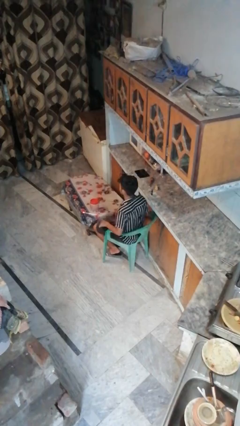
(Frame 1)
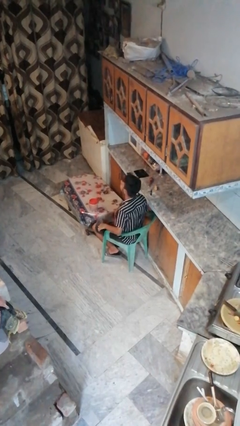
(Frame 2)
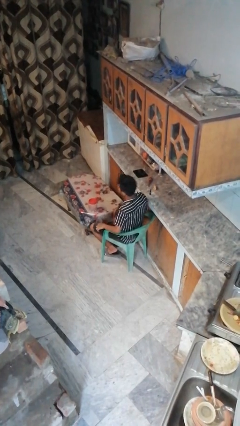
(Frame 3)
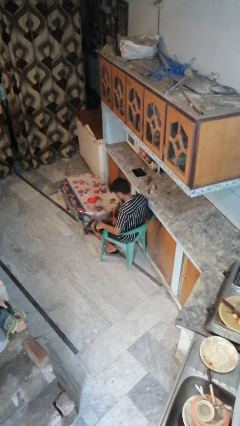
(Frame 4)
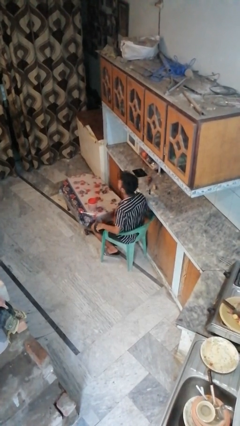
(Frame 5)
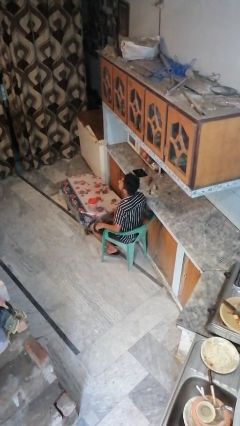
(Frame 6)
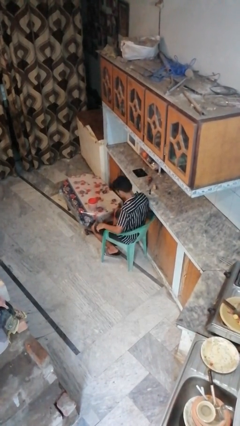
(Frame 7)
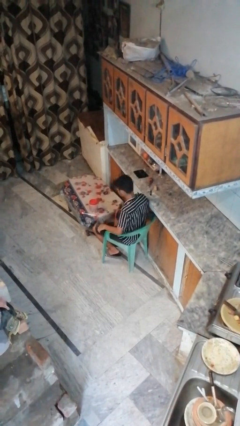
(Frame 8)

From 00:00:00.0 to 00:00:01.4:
person nods head

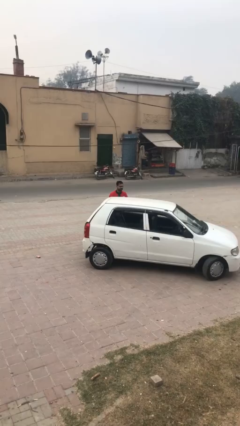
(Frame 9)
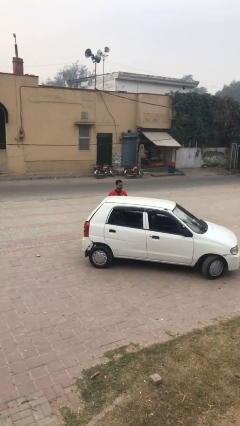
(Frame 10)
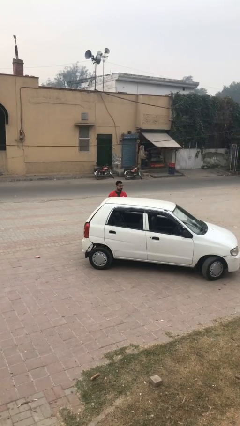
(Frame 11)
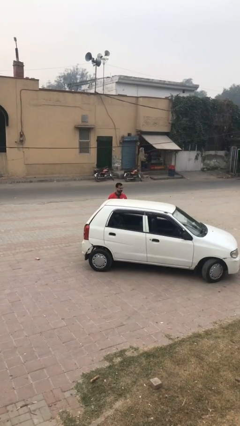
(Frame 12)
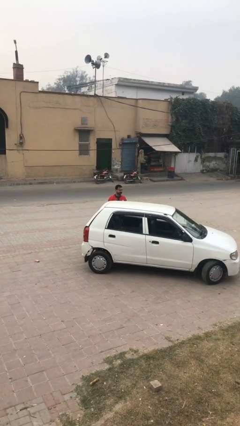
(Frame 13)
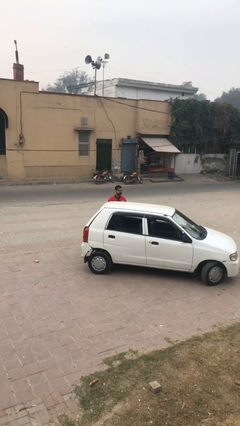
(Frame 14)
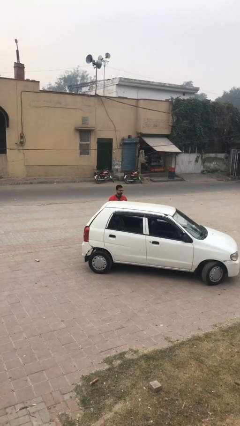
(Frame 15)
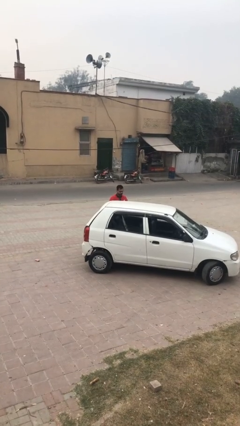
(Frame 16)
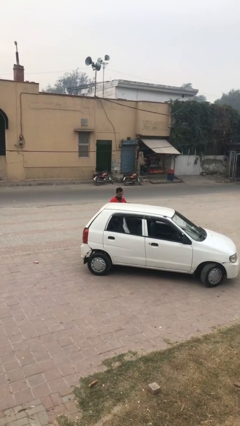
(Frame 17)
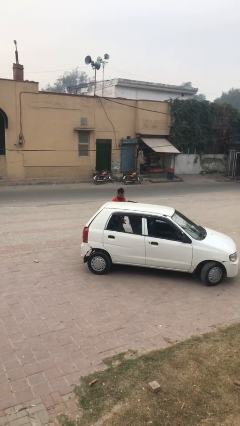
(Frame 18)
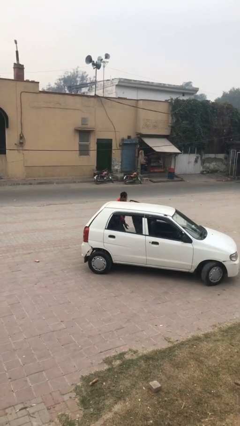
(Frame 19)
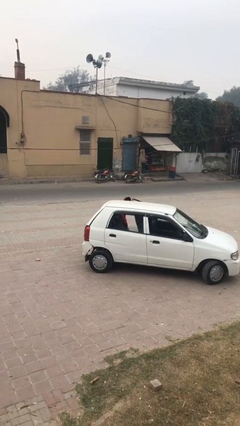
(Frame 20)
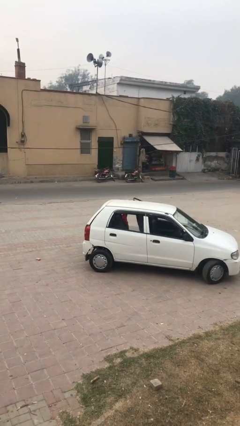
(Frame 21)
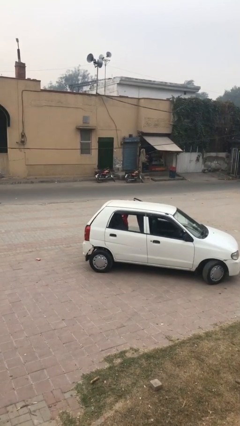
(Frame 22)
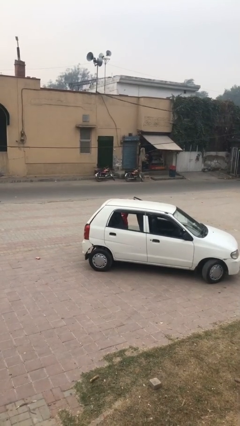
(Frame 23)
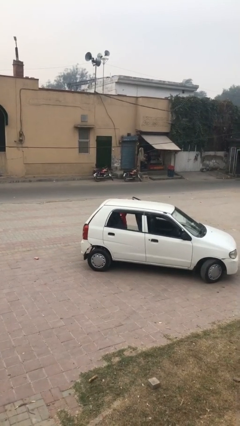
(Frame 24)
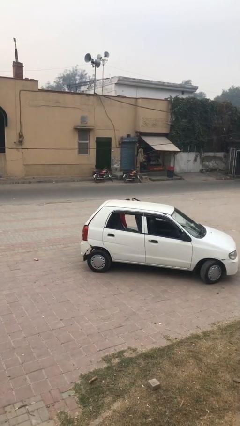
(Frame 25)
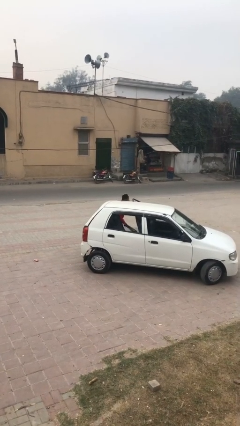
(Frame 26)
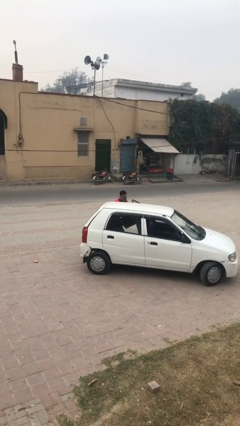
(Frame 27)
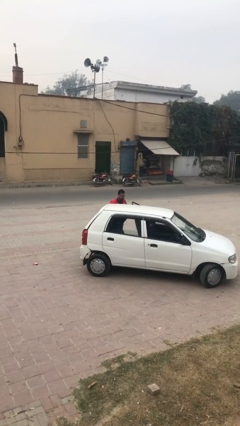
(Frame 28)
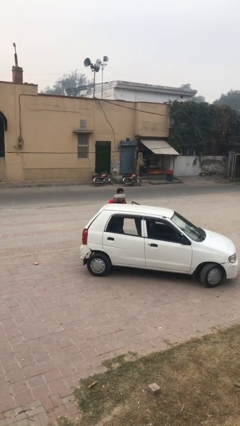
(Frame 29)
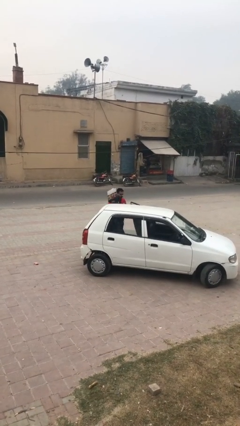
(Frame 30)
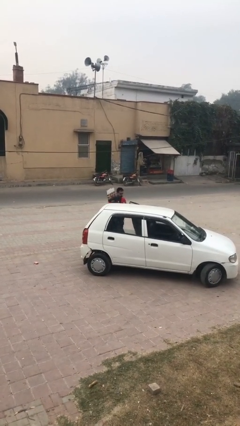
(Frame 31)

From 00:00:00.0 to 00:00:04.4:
person unloads car

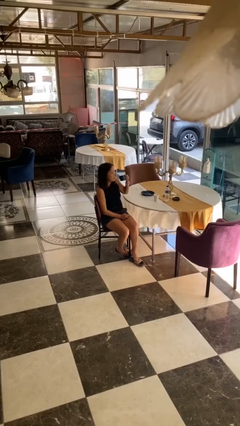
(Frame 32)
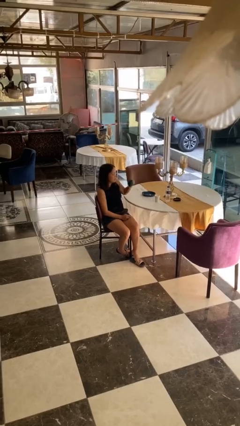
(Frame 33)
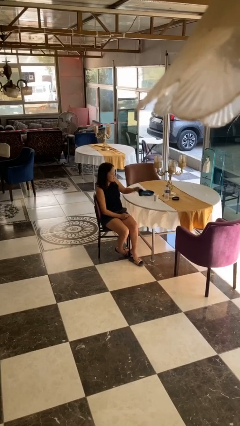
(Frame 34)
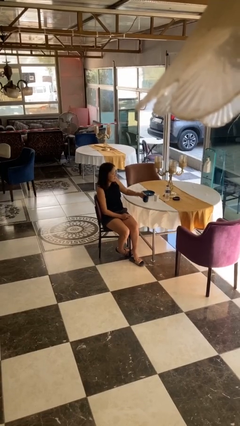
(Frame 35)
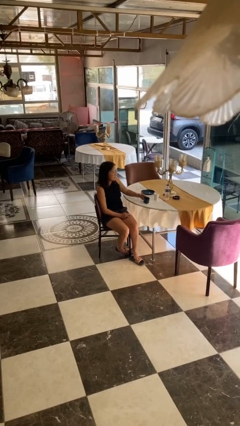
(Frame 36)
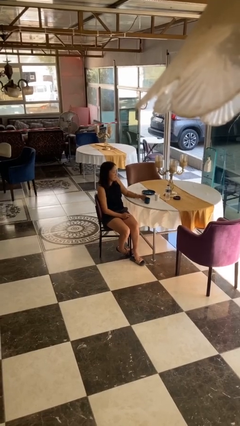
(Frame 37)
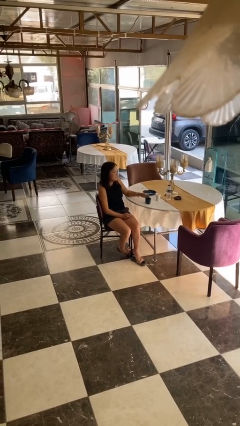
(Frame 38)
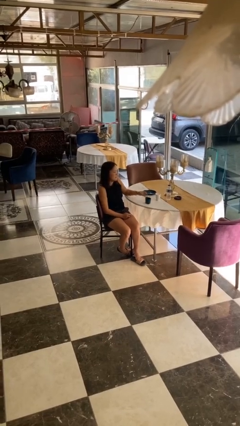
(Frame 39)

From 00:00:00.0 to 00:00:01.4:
person puts down object on table

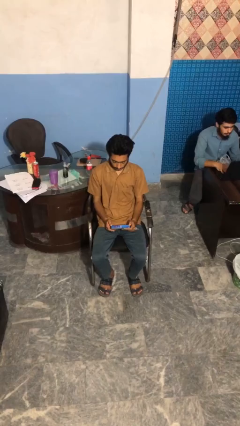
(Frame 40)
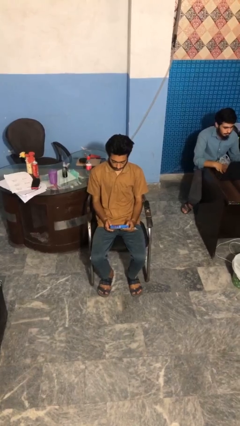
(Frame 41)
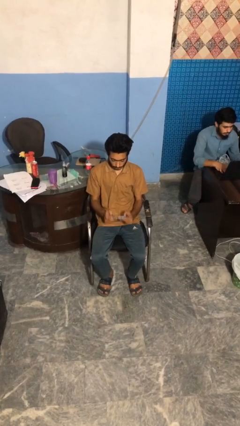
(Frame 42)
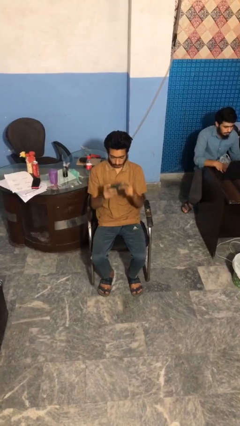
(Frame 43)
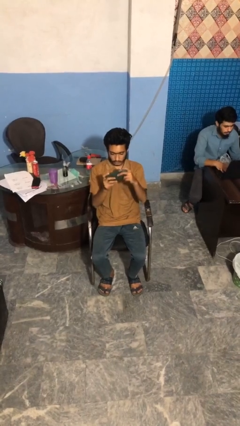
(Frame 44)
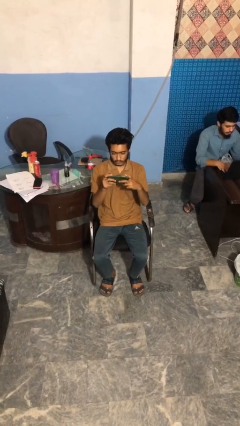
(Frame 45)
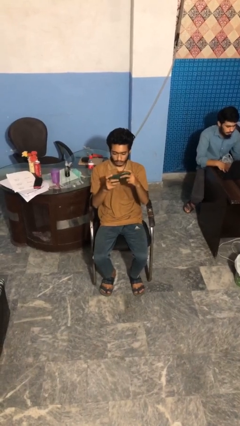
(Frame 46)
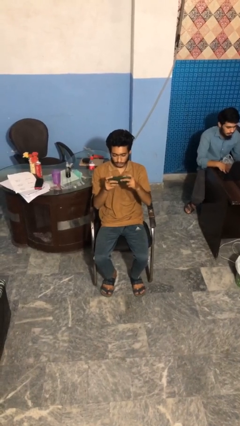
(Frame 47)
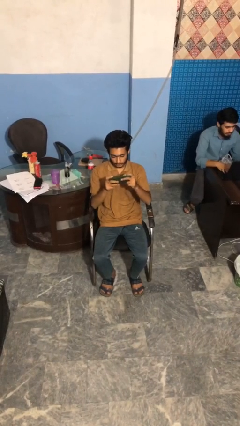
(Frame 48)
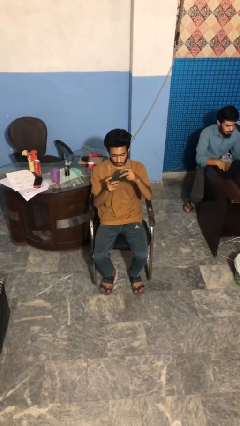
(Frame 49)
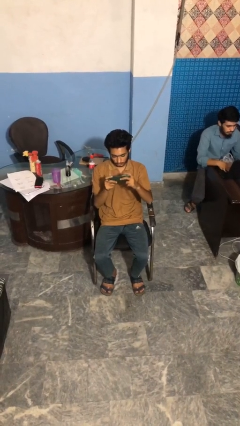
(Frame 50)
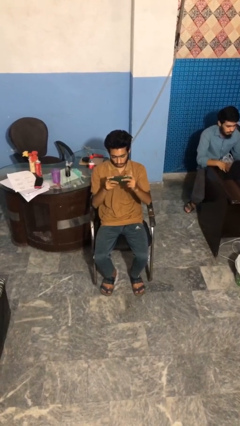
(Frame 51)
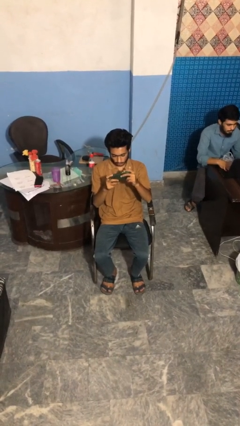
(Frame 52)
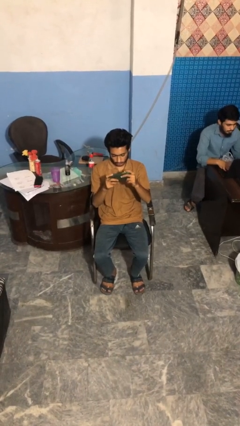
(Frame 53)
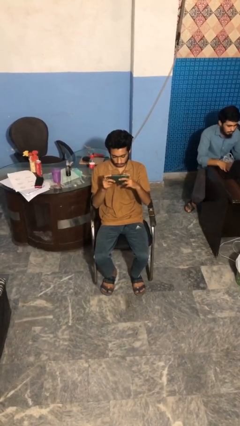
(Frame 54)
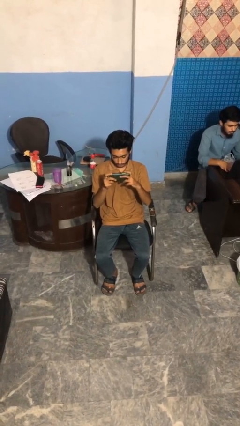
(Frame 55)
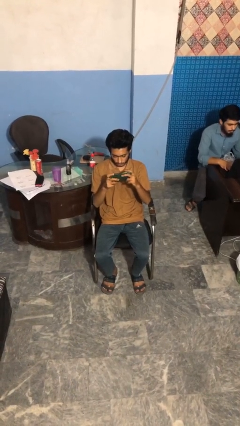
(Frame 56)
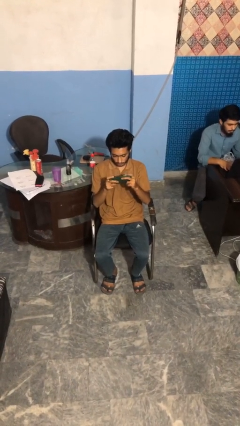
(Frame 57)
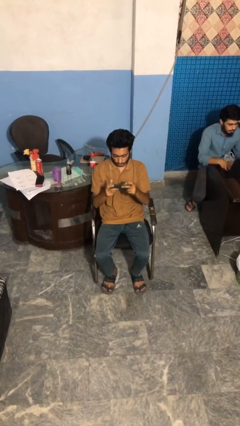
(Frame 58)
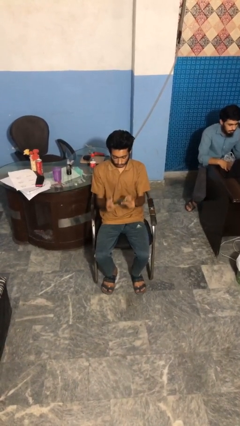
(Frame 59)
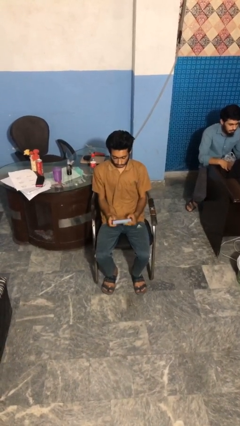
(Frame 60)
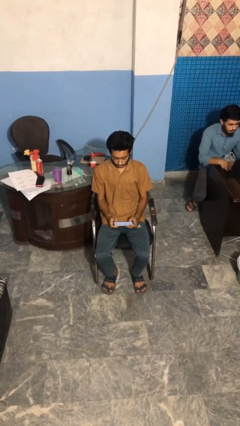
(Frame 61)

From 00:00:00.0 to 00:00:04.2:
person interacts with handheld game

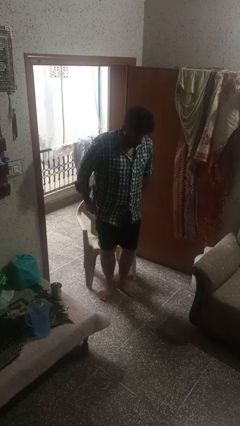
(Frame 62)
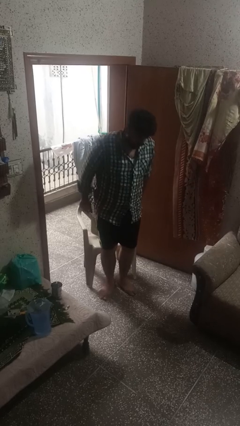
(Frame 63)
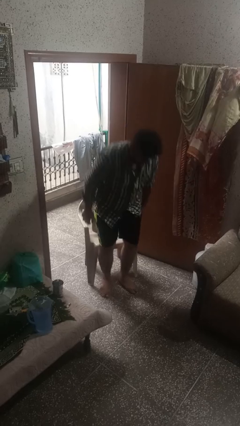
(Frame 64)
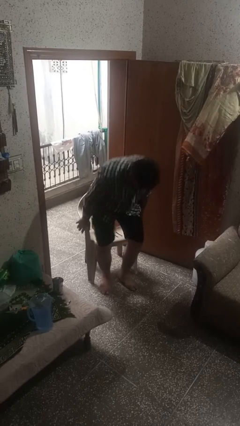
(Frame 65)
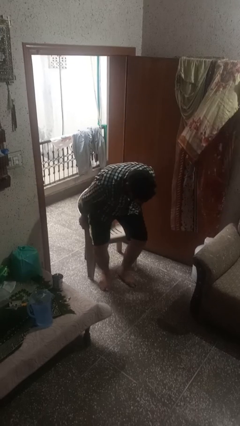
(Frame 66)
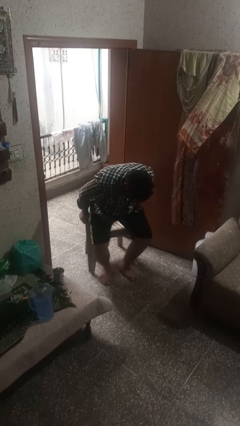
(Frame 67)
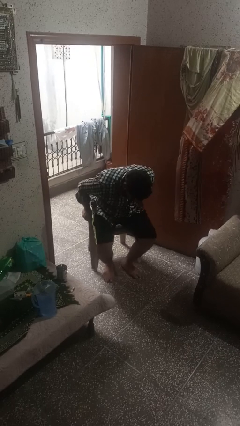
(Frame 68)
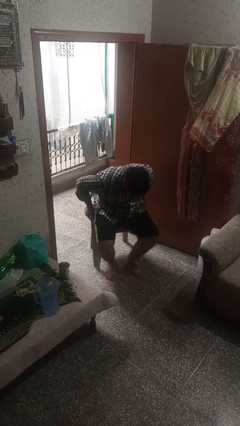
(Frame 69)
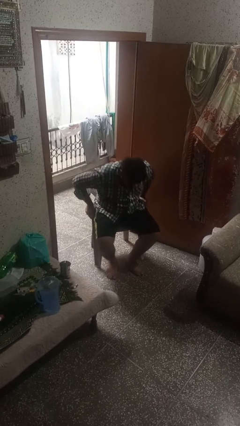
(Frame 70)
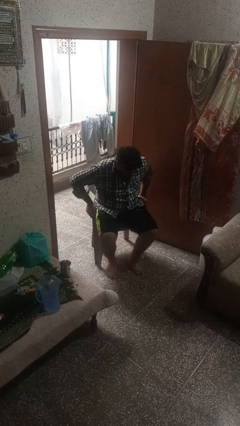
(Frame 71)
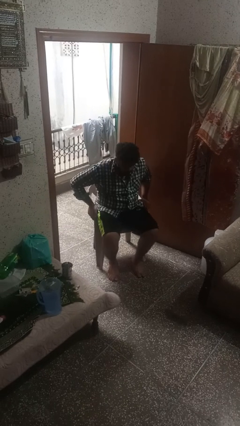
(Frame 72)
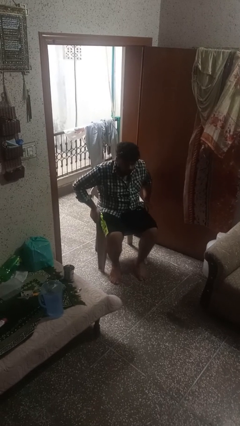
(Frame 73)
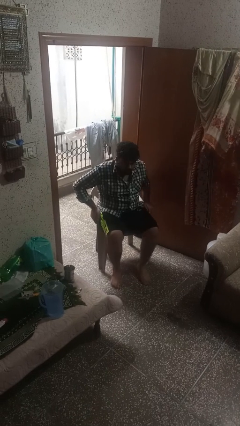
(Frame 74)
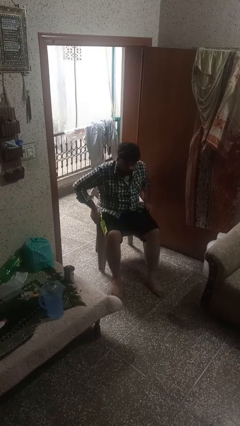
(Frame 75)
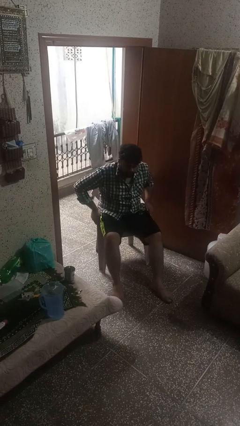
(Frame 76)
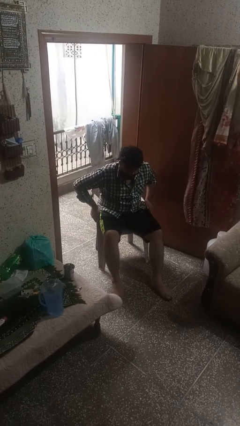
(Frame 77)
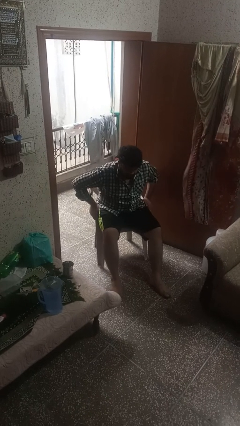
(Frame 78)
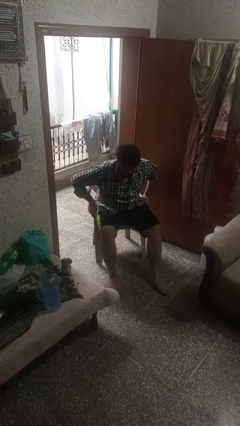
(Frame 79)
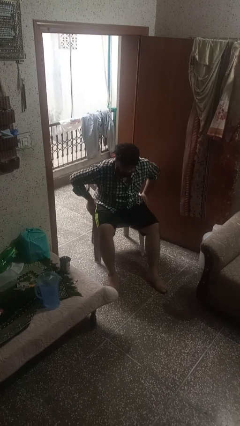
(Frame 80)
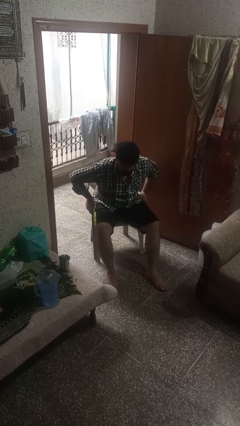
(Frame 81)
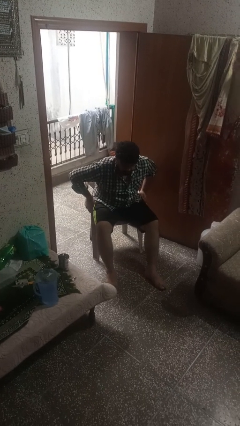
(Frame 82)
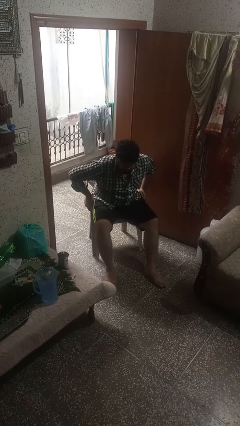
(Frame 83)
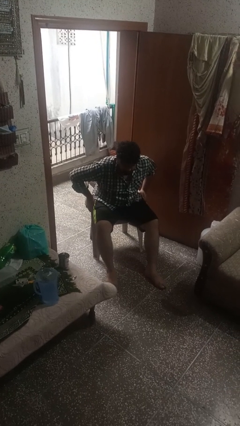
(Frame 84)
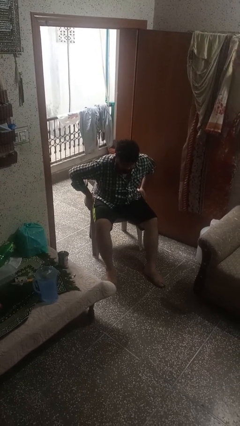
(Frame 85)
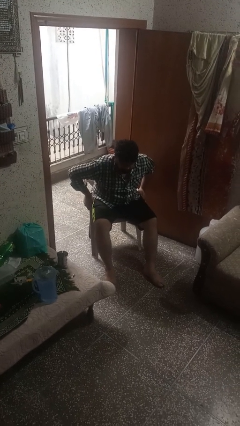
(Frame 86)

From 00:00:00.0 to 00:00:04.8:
person sits down

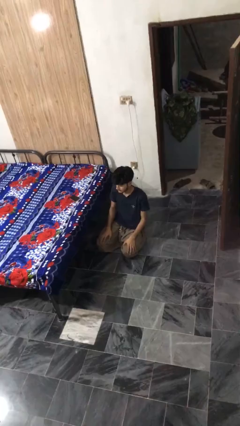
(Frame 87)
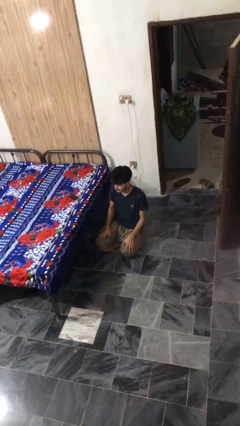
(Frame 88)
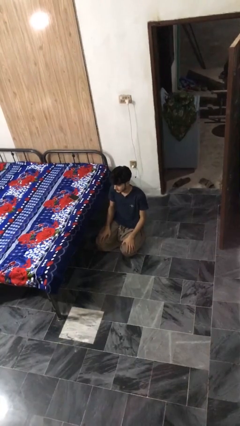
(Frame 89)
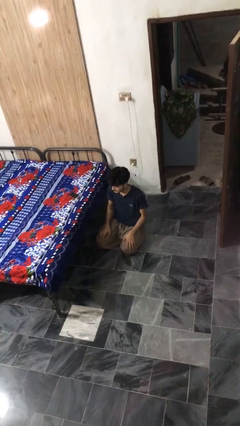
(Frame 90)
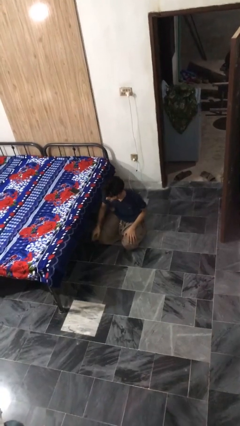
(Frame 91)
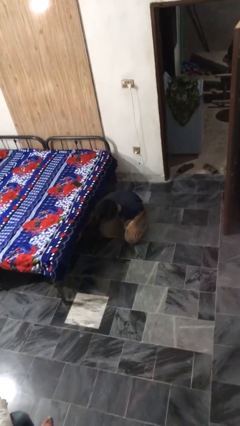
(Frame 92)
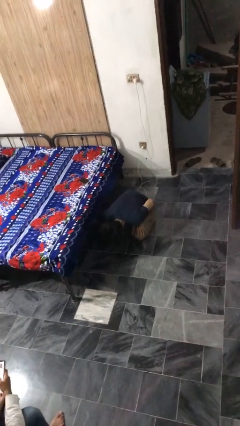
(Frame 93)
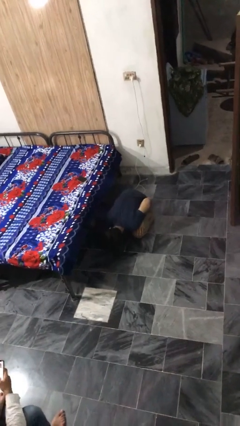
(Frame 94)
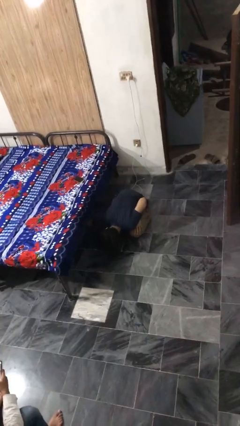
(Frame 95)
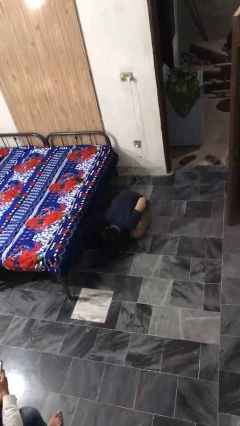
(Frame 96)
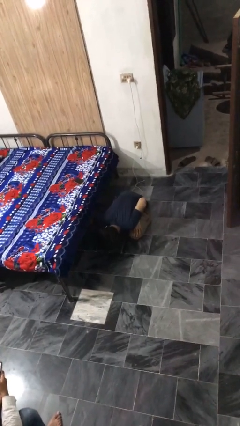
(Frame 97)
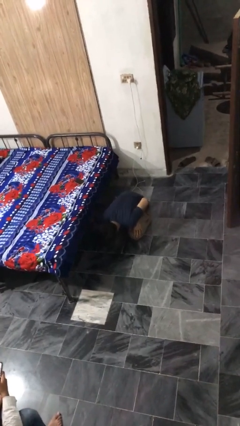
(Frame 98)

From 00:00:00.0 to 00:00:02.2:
person searches under bed
